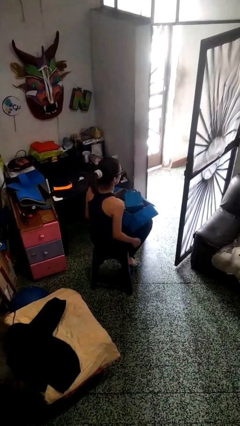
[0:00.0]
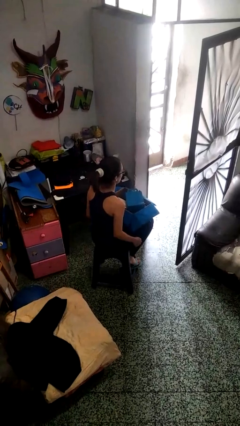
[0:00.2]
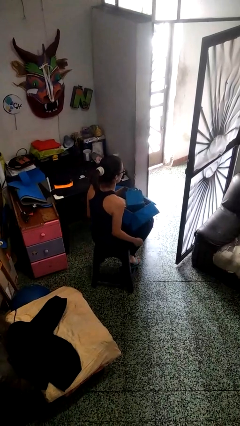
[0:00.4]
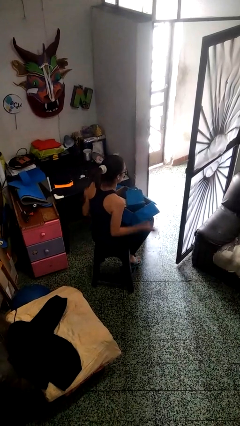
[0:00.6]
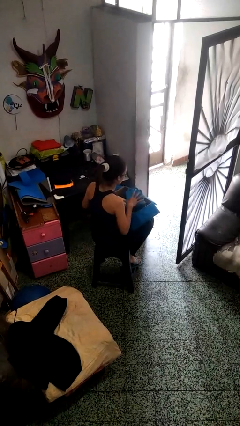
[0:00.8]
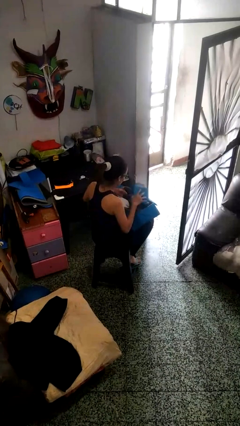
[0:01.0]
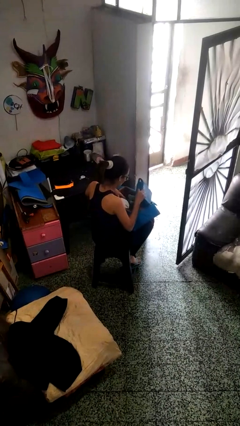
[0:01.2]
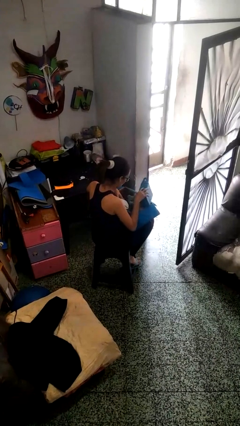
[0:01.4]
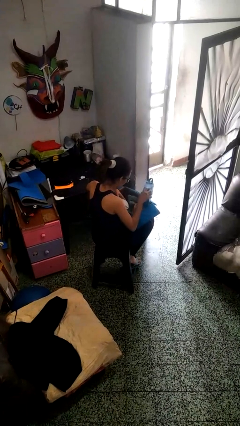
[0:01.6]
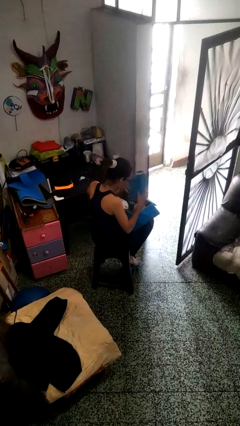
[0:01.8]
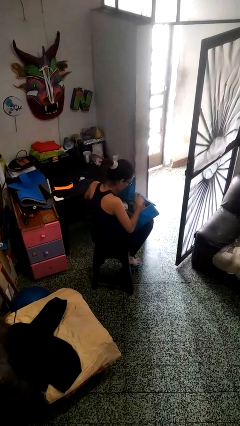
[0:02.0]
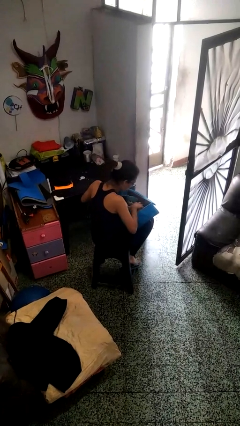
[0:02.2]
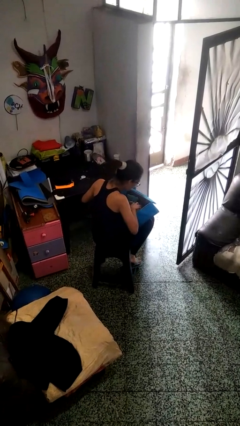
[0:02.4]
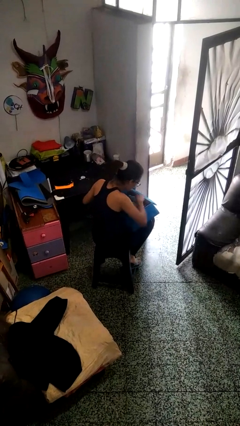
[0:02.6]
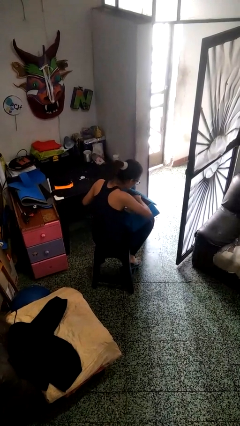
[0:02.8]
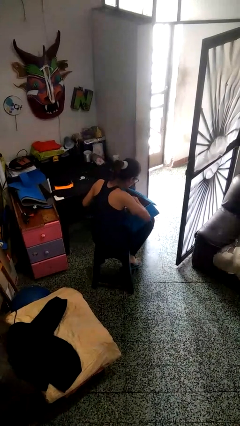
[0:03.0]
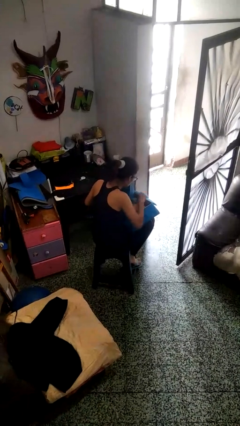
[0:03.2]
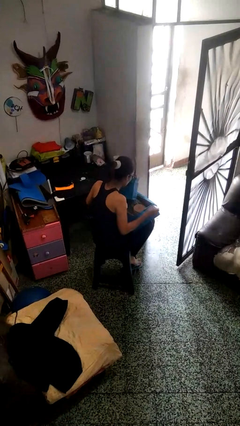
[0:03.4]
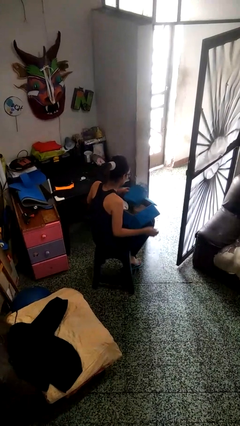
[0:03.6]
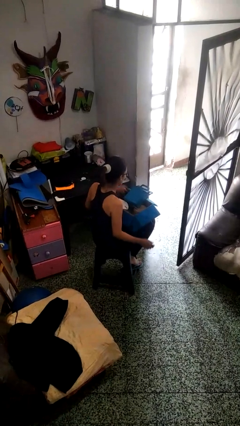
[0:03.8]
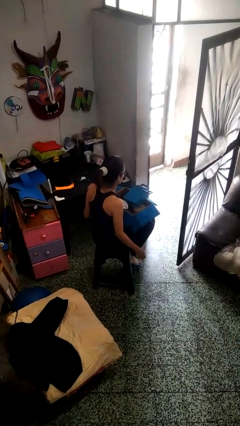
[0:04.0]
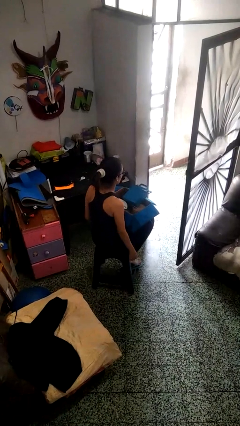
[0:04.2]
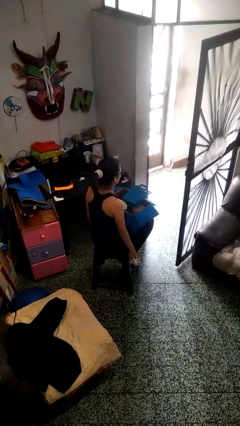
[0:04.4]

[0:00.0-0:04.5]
person searches in box

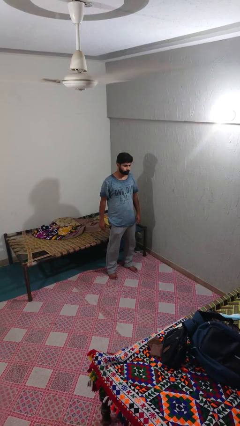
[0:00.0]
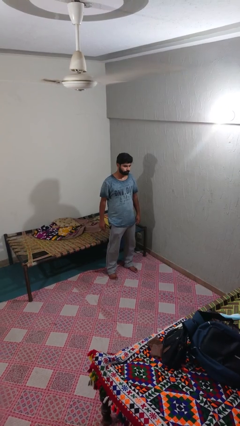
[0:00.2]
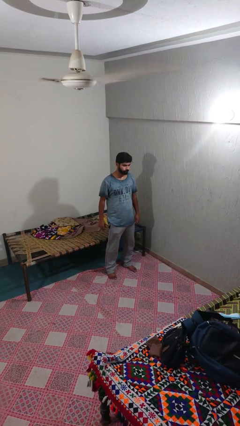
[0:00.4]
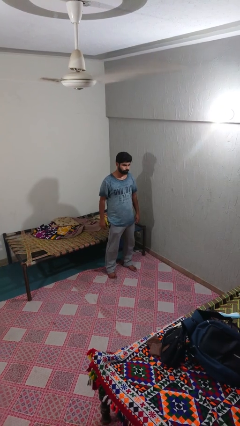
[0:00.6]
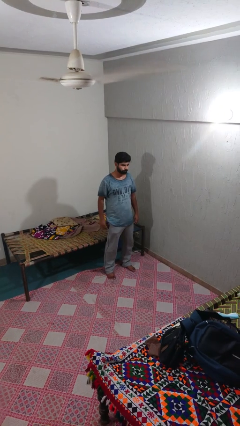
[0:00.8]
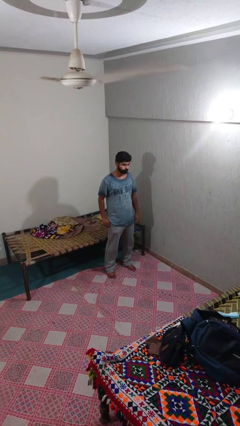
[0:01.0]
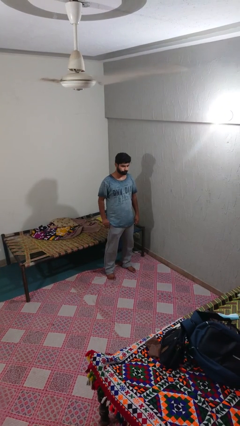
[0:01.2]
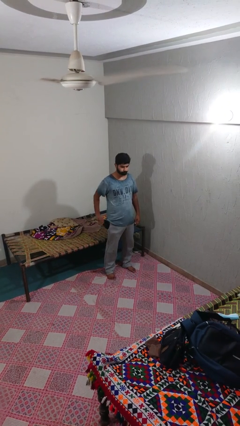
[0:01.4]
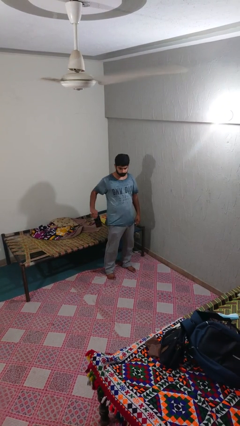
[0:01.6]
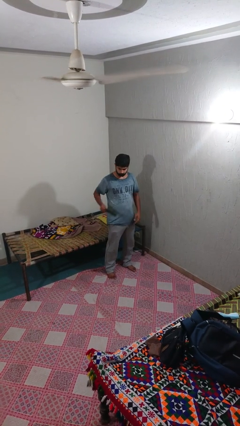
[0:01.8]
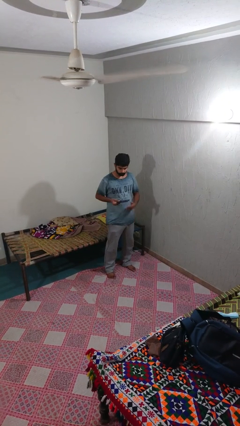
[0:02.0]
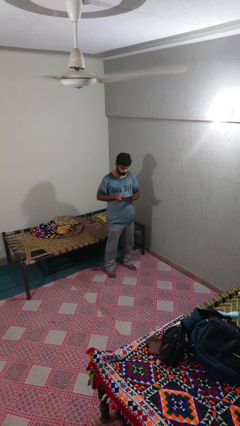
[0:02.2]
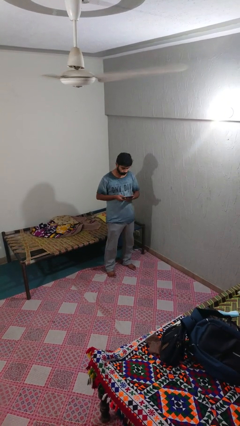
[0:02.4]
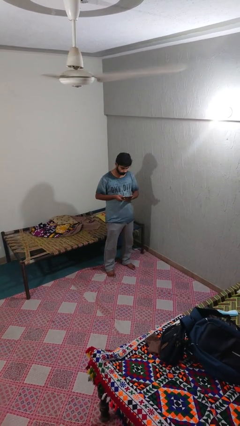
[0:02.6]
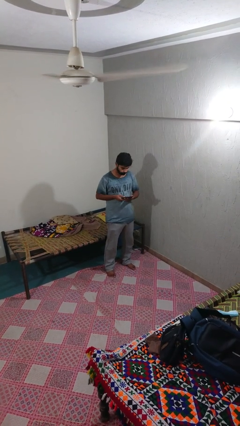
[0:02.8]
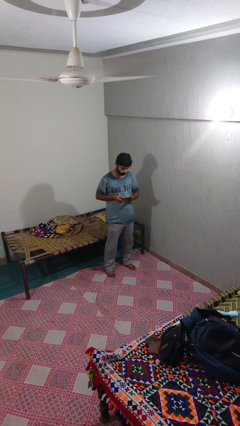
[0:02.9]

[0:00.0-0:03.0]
person takes phone from pocket

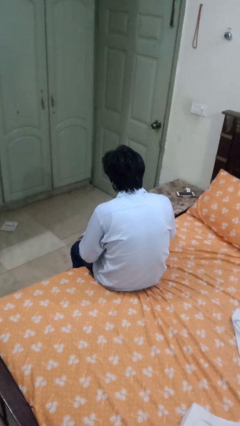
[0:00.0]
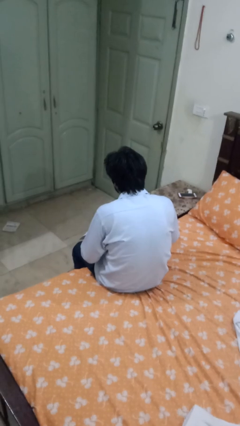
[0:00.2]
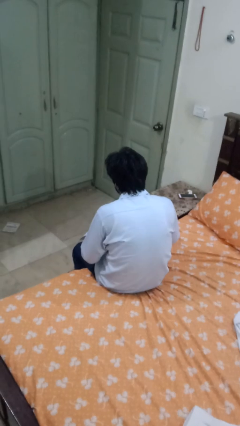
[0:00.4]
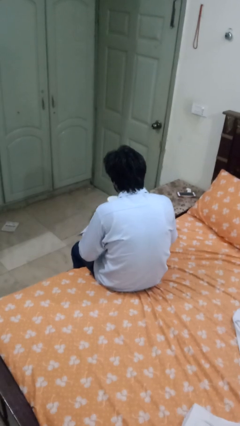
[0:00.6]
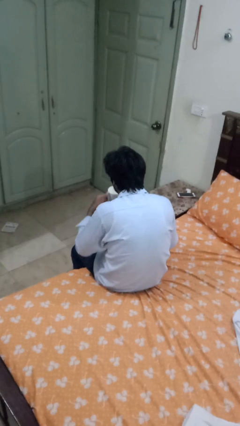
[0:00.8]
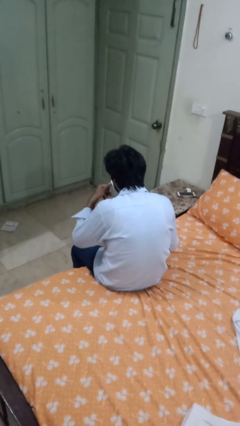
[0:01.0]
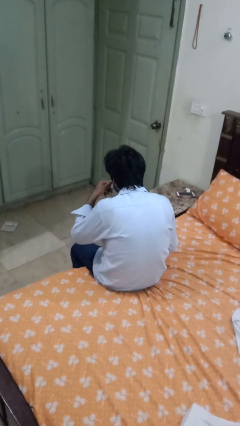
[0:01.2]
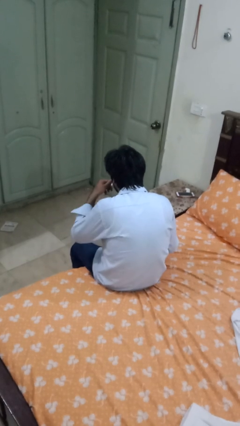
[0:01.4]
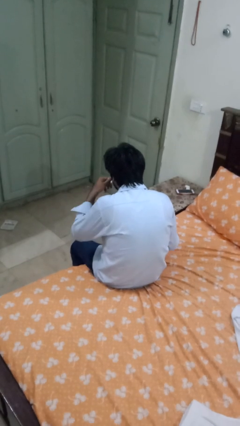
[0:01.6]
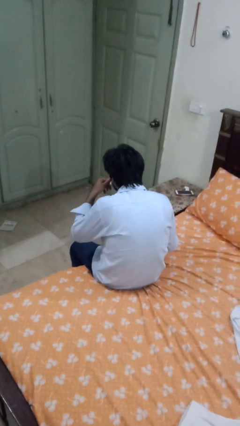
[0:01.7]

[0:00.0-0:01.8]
person drinks from mug

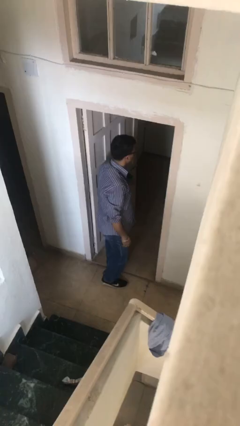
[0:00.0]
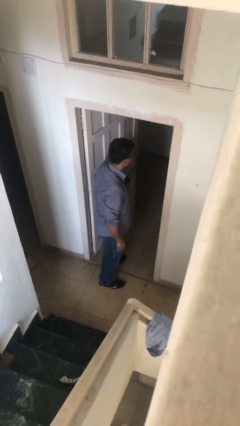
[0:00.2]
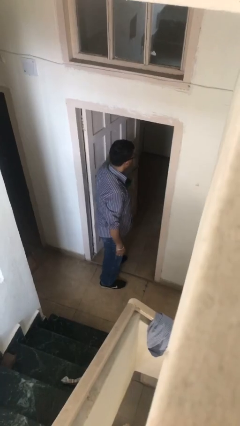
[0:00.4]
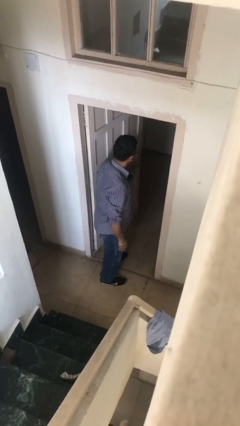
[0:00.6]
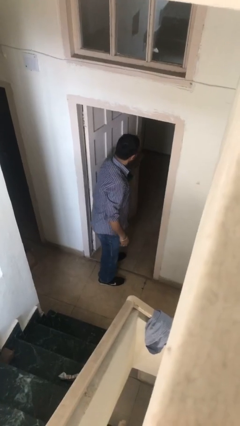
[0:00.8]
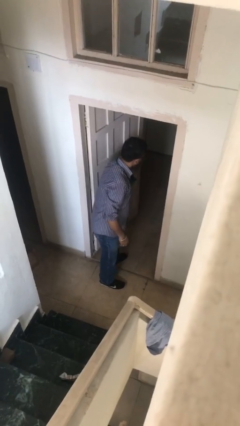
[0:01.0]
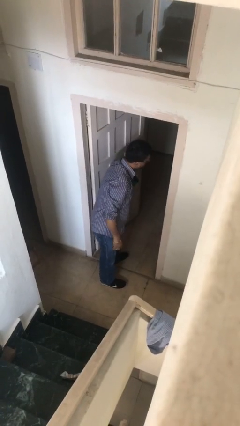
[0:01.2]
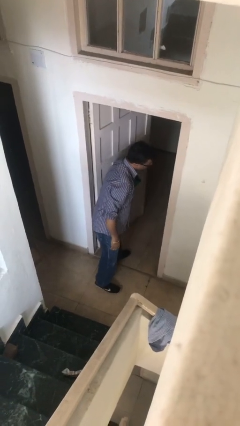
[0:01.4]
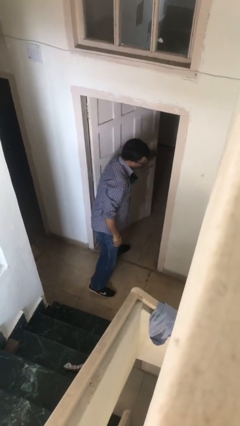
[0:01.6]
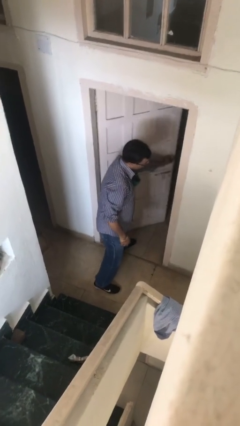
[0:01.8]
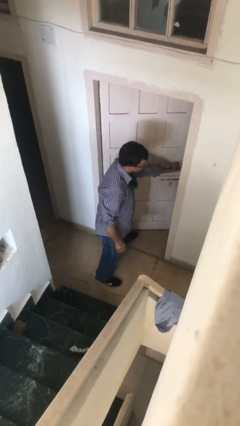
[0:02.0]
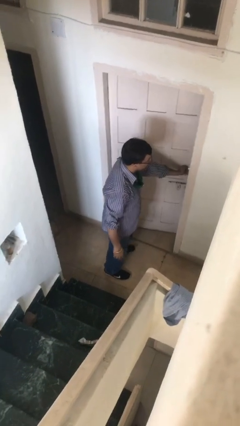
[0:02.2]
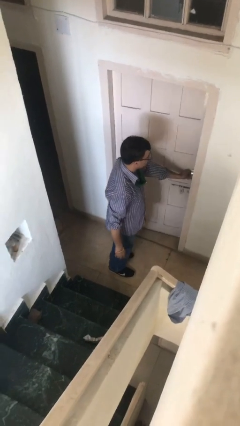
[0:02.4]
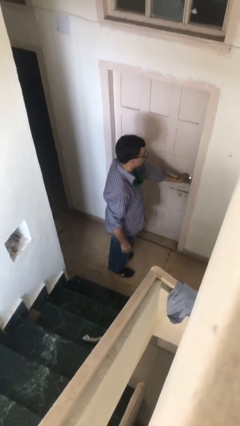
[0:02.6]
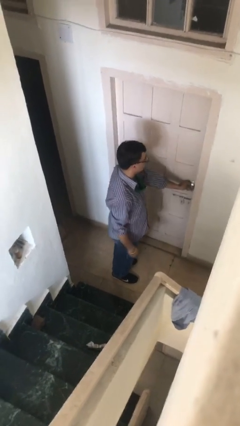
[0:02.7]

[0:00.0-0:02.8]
person closes facility door

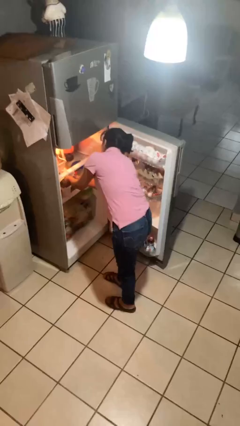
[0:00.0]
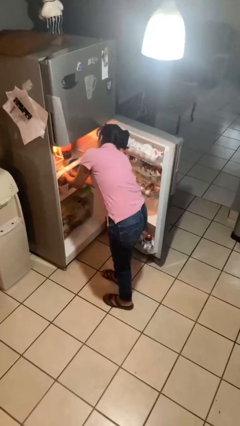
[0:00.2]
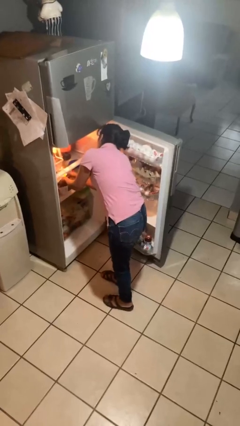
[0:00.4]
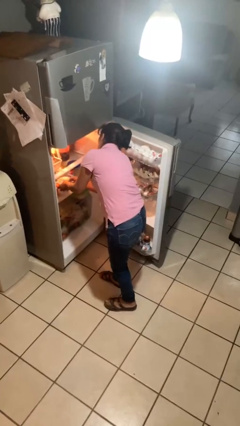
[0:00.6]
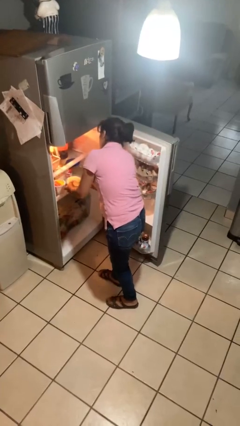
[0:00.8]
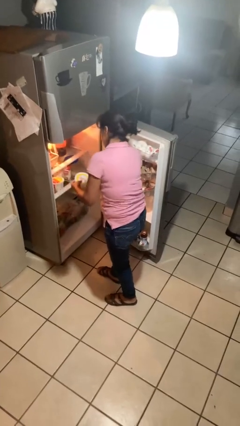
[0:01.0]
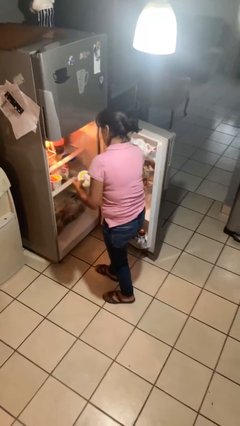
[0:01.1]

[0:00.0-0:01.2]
person puts object into refrigerator

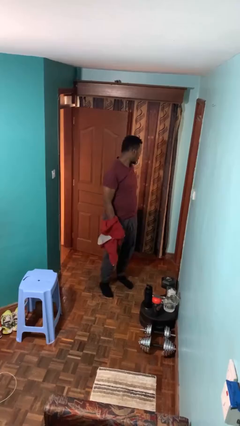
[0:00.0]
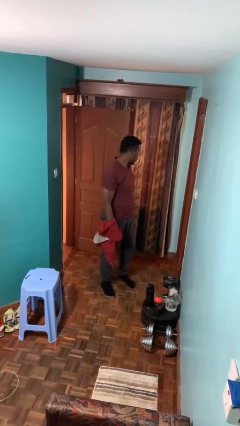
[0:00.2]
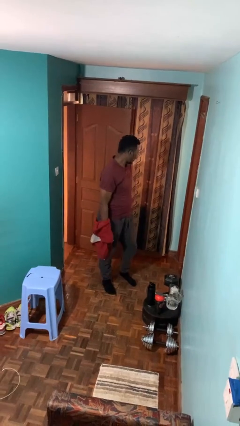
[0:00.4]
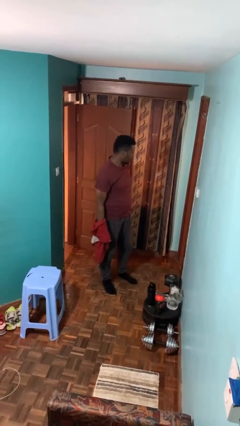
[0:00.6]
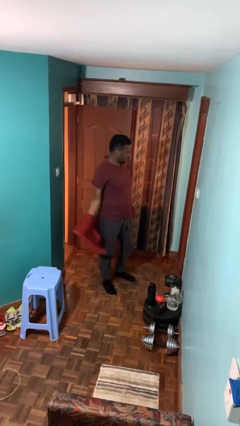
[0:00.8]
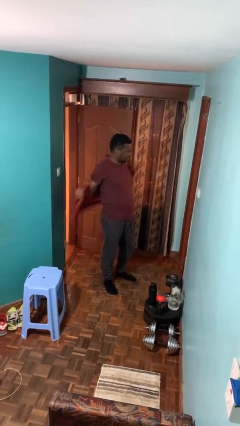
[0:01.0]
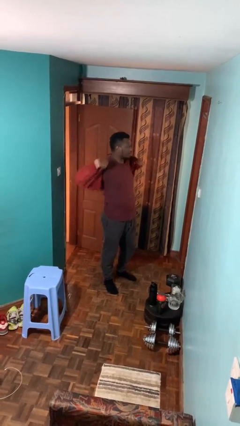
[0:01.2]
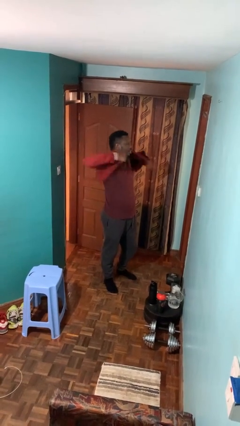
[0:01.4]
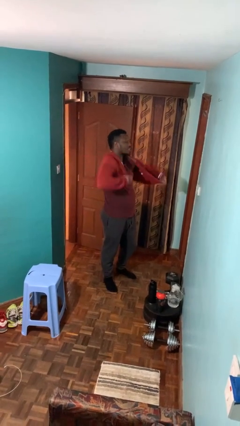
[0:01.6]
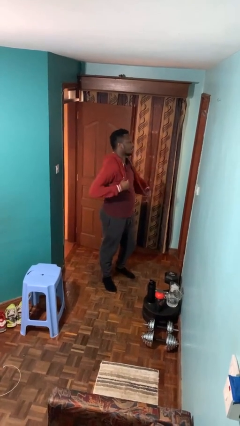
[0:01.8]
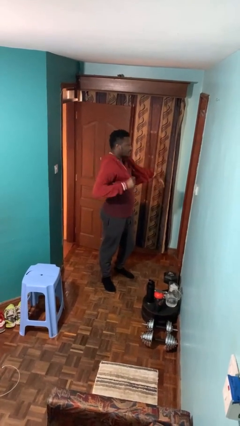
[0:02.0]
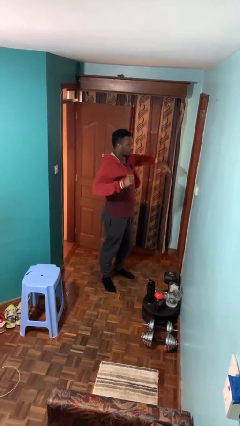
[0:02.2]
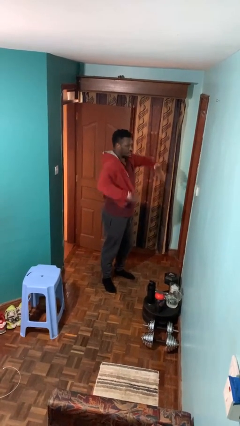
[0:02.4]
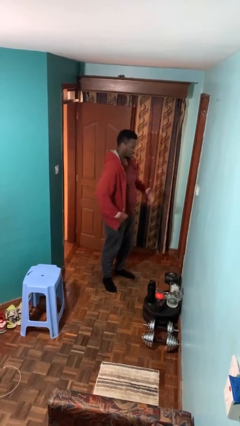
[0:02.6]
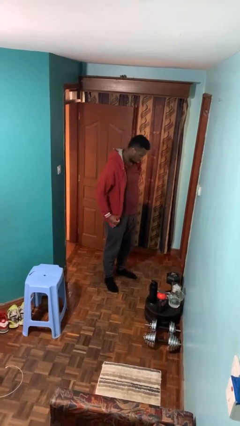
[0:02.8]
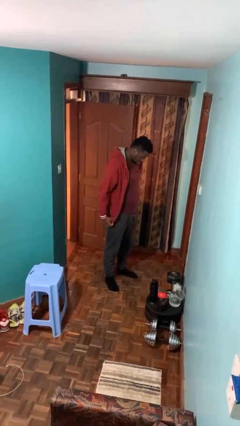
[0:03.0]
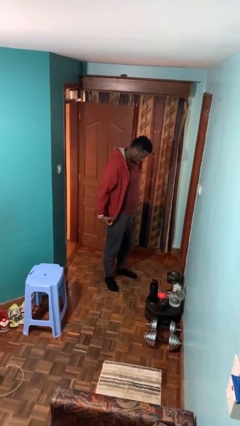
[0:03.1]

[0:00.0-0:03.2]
person puts on jacket

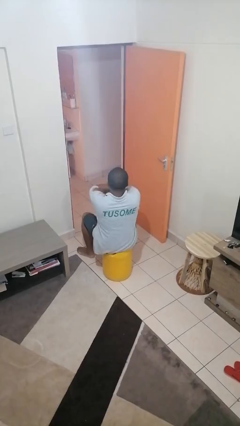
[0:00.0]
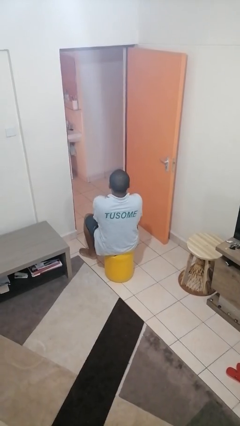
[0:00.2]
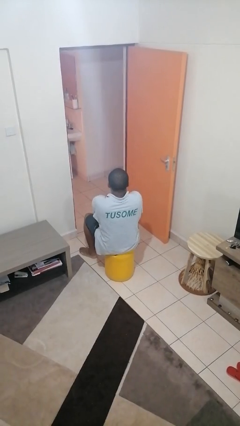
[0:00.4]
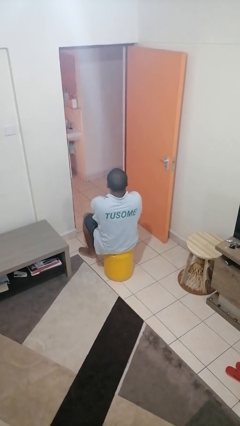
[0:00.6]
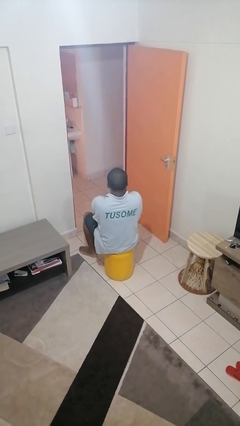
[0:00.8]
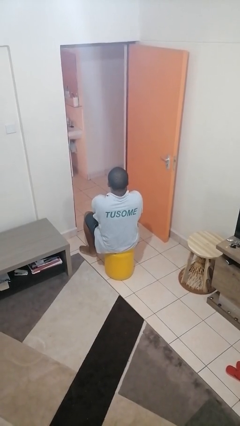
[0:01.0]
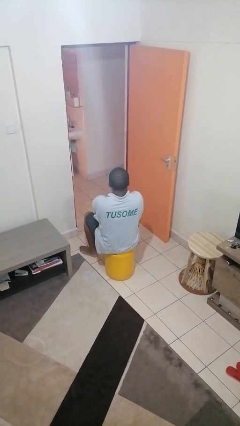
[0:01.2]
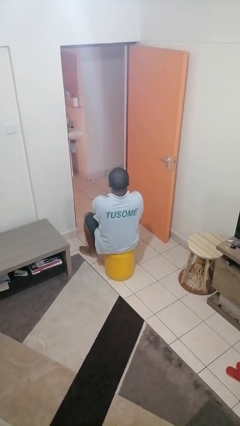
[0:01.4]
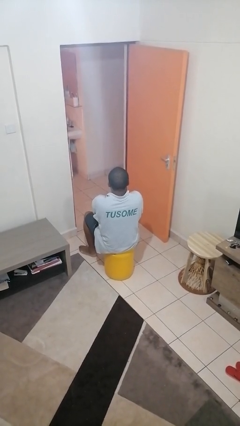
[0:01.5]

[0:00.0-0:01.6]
person crosses arms
